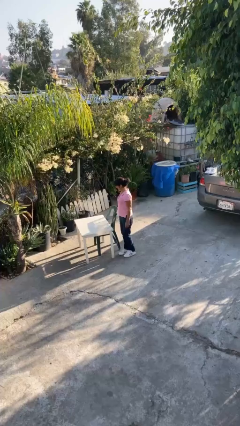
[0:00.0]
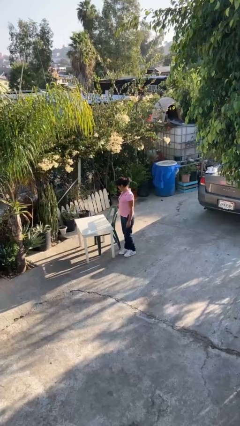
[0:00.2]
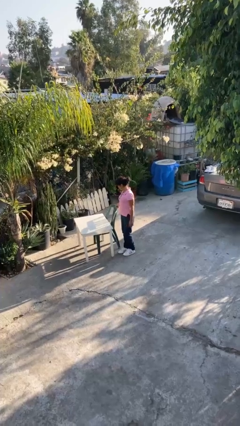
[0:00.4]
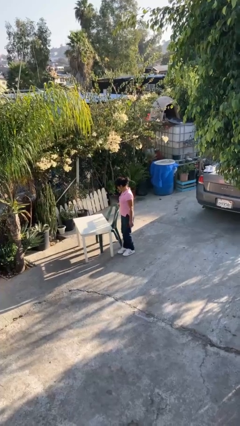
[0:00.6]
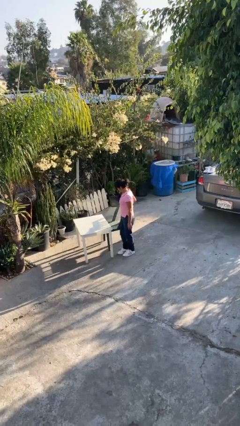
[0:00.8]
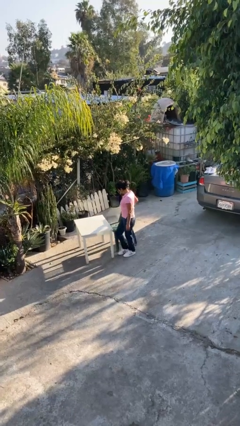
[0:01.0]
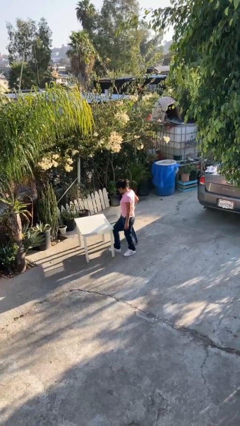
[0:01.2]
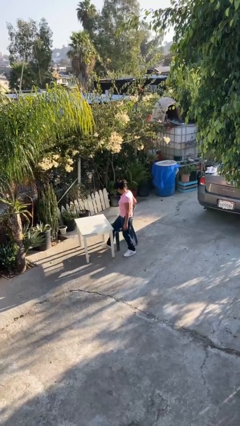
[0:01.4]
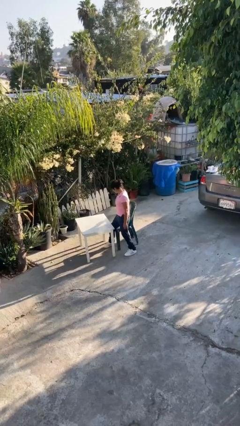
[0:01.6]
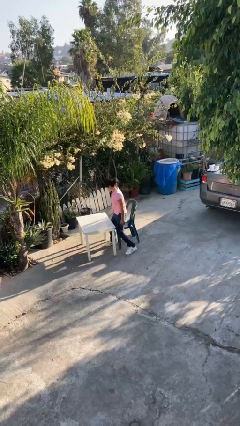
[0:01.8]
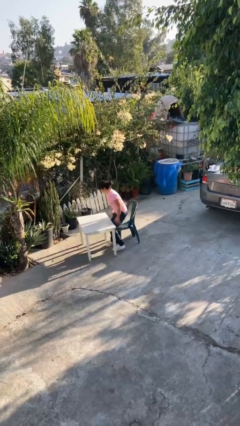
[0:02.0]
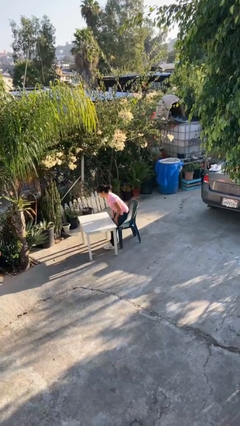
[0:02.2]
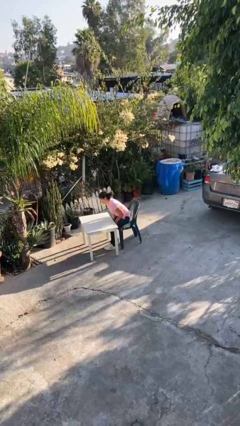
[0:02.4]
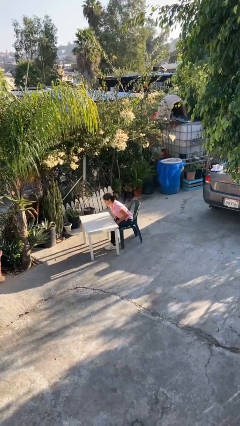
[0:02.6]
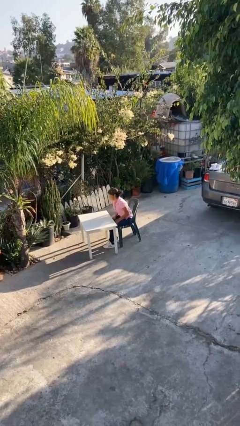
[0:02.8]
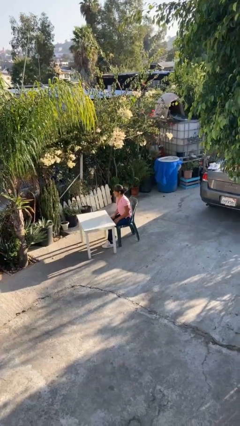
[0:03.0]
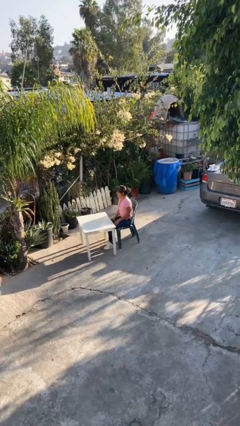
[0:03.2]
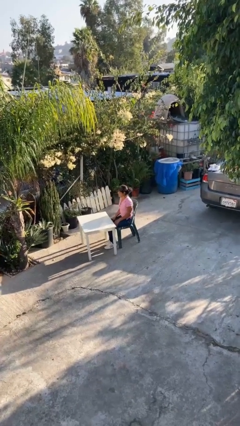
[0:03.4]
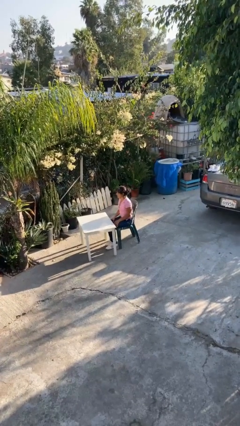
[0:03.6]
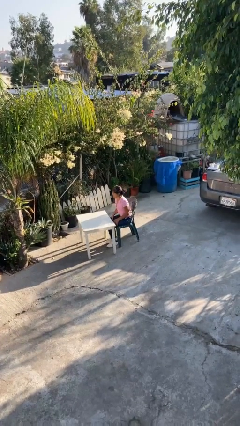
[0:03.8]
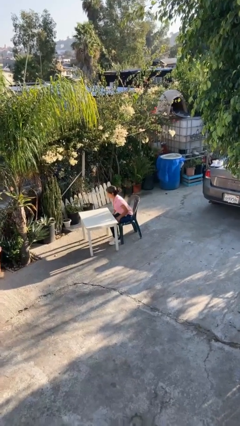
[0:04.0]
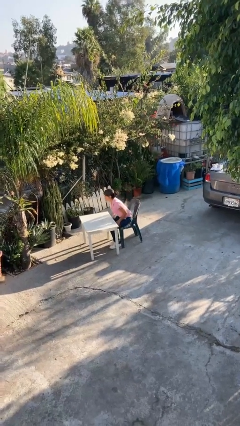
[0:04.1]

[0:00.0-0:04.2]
person sits down

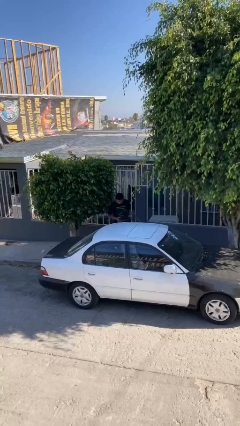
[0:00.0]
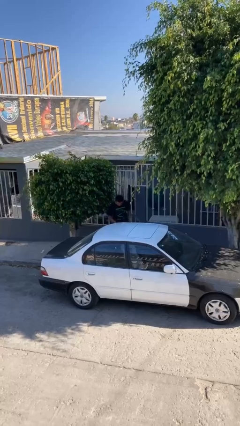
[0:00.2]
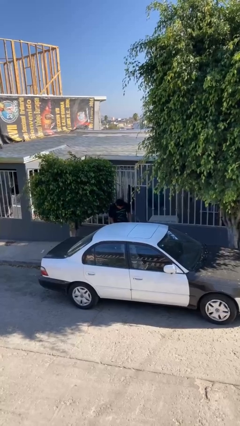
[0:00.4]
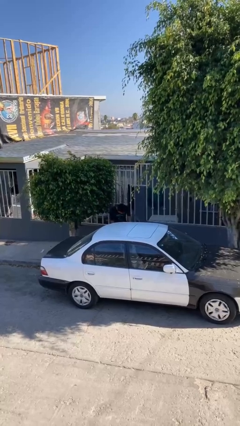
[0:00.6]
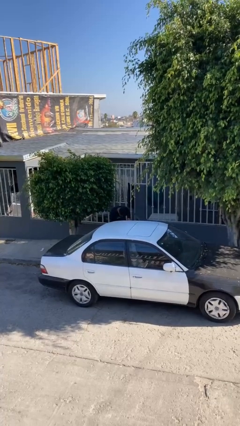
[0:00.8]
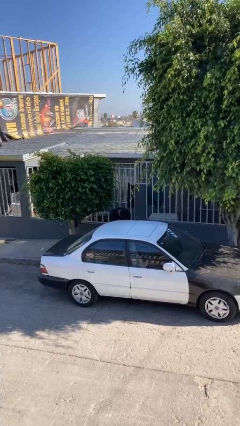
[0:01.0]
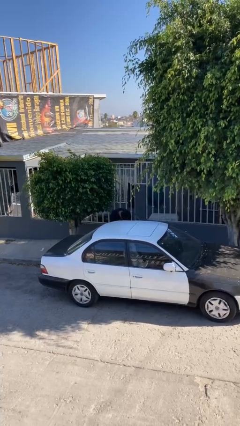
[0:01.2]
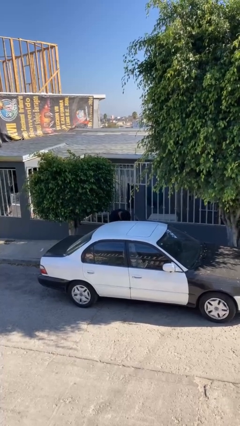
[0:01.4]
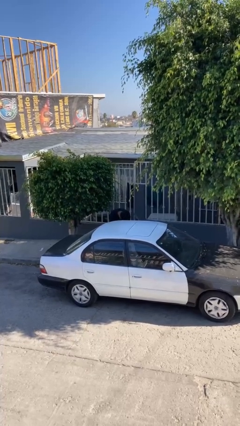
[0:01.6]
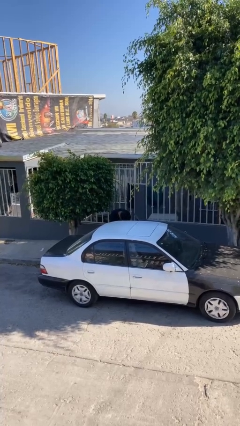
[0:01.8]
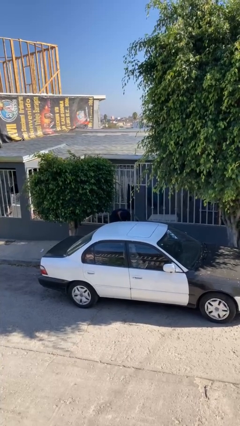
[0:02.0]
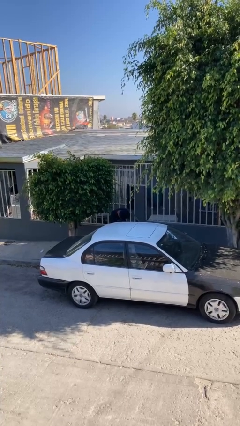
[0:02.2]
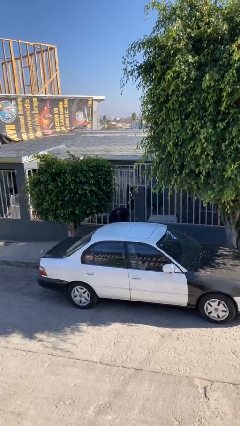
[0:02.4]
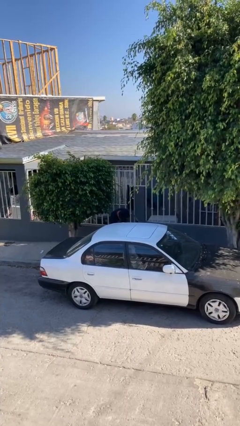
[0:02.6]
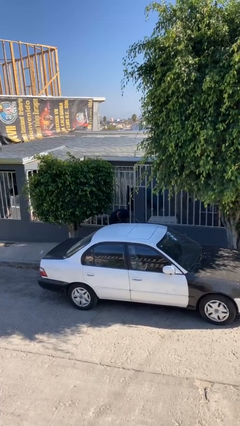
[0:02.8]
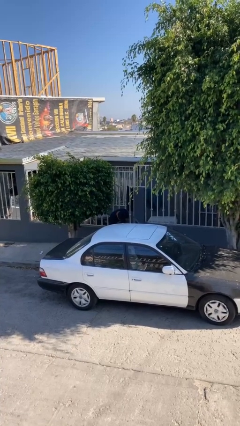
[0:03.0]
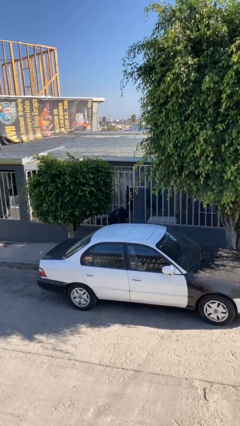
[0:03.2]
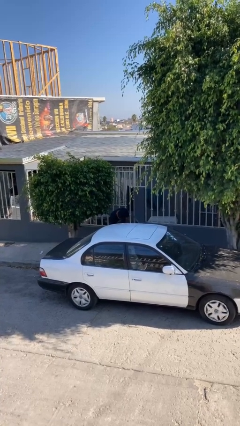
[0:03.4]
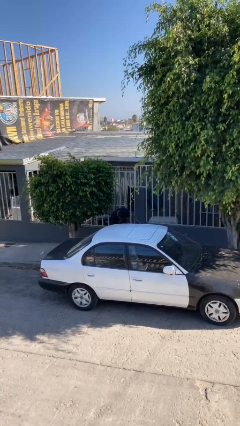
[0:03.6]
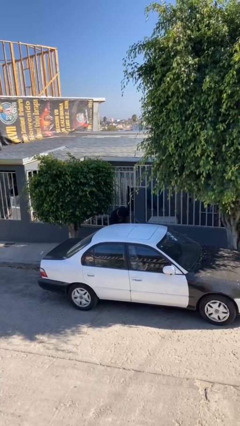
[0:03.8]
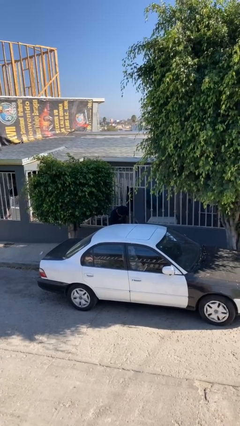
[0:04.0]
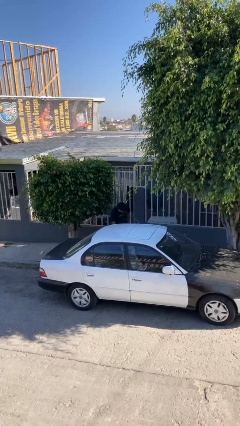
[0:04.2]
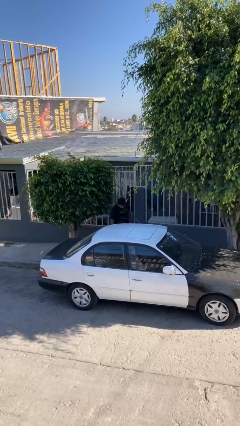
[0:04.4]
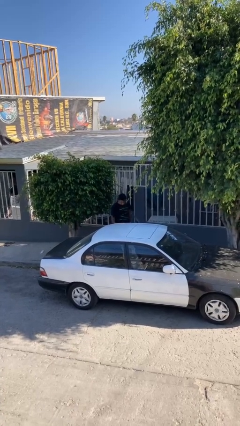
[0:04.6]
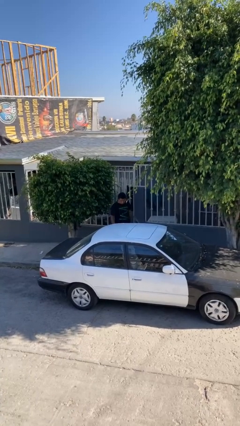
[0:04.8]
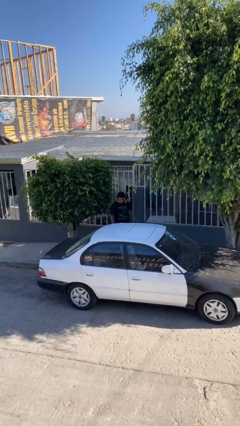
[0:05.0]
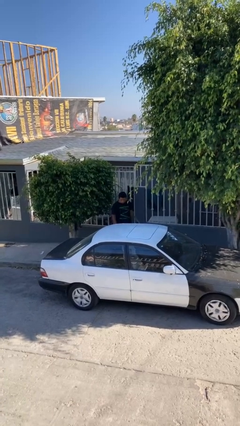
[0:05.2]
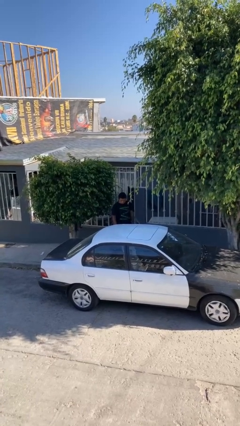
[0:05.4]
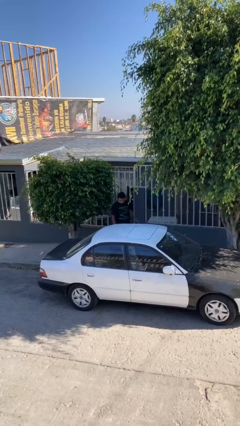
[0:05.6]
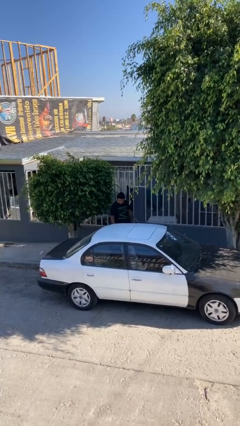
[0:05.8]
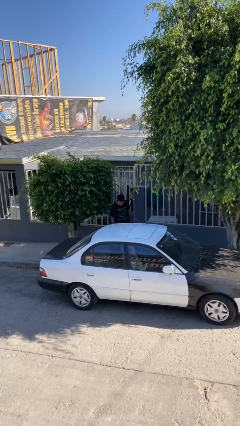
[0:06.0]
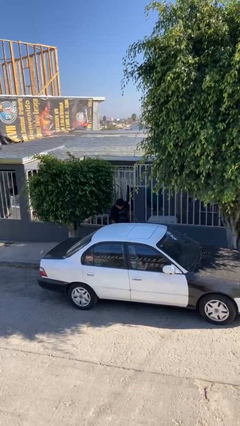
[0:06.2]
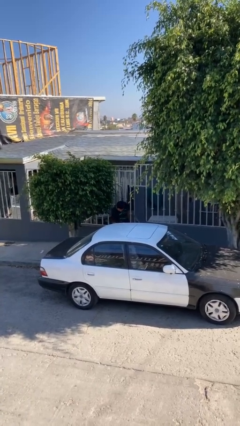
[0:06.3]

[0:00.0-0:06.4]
person loads car

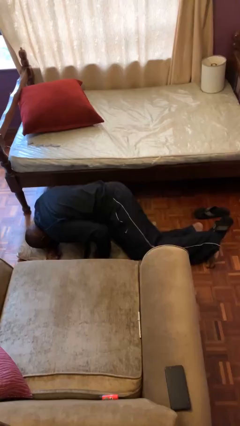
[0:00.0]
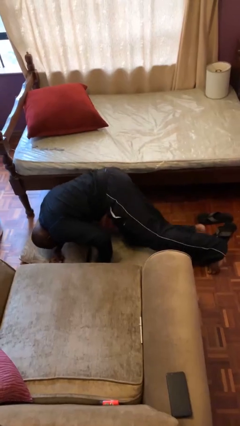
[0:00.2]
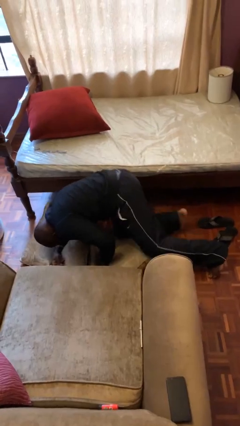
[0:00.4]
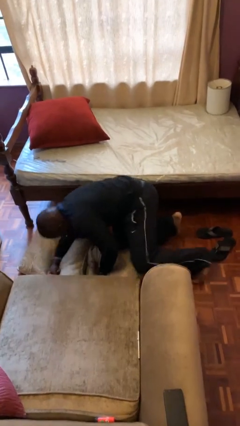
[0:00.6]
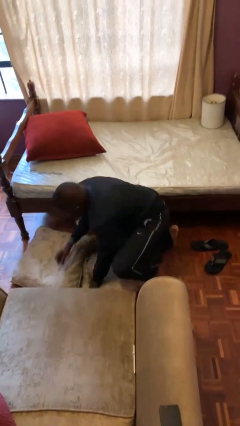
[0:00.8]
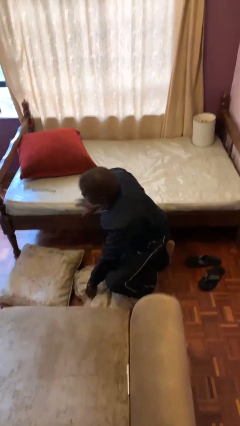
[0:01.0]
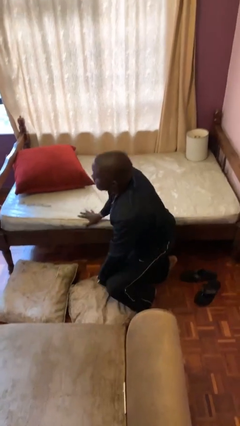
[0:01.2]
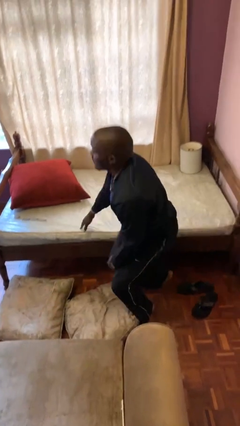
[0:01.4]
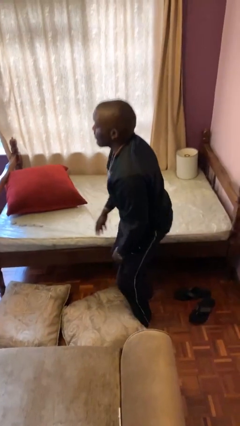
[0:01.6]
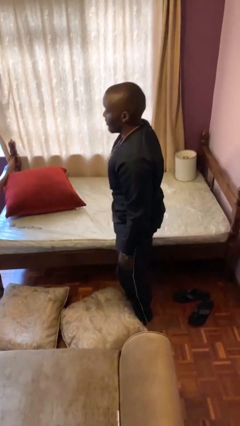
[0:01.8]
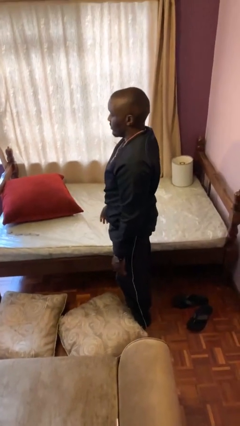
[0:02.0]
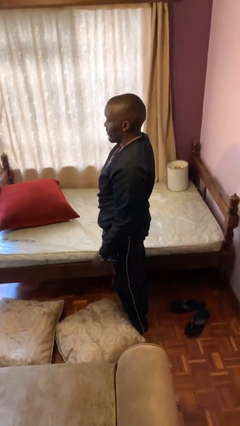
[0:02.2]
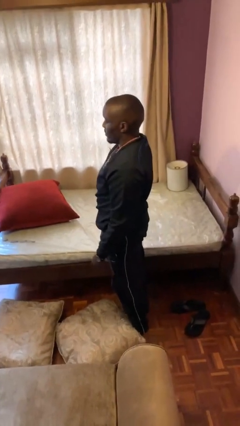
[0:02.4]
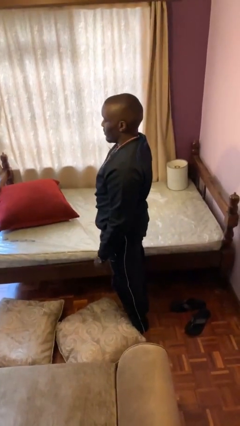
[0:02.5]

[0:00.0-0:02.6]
person stands up from floor

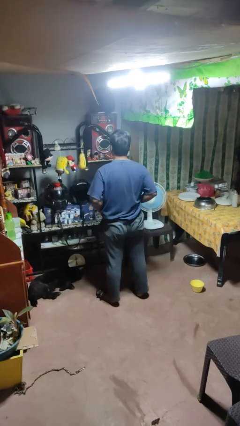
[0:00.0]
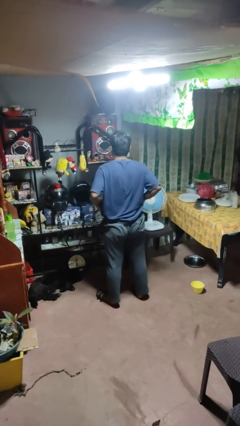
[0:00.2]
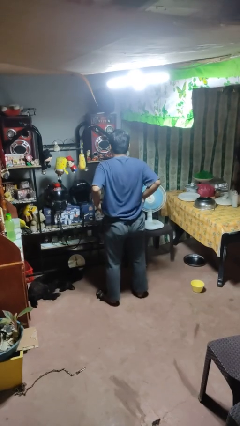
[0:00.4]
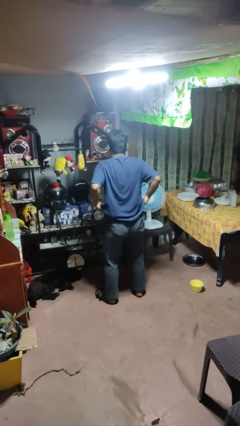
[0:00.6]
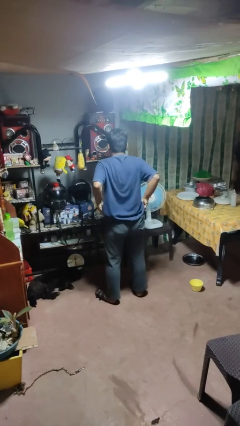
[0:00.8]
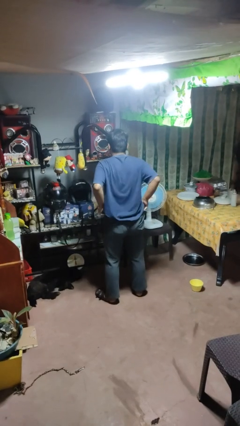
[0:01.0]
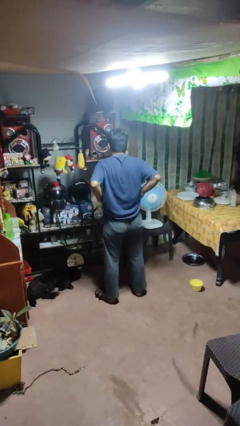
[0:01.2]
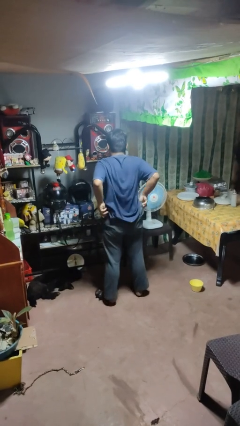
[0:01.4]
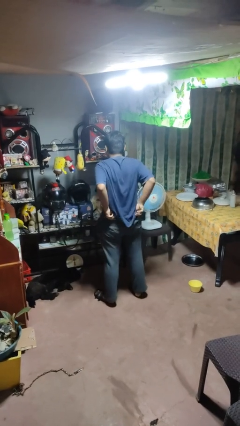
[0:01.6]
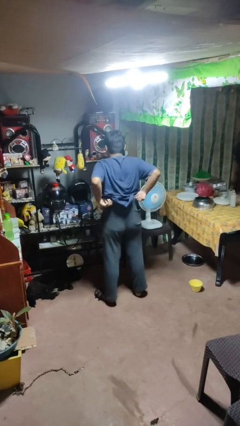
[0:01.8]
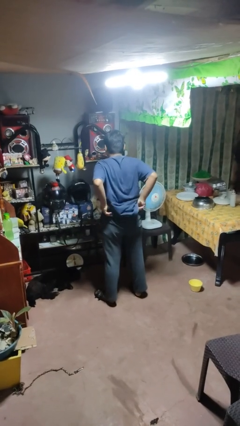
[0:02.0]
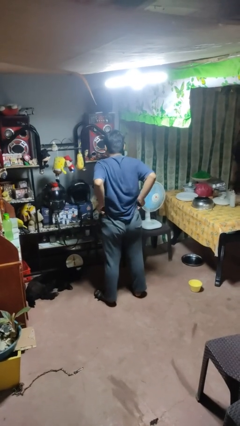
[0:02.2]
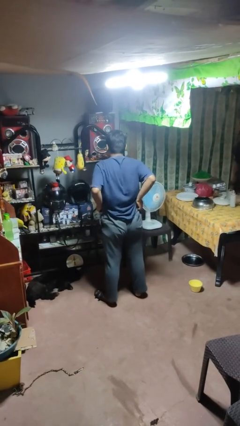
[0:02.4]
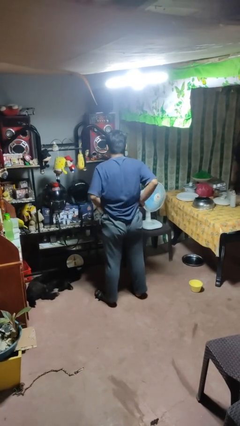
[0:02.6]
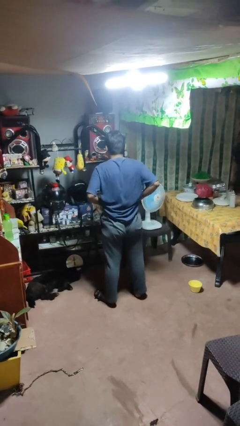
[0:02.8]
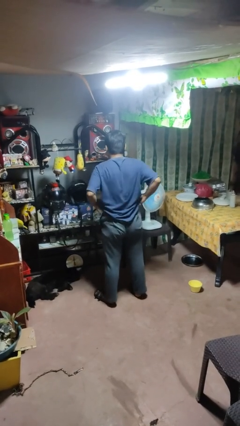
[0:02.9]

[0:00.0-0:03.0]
person hikes up pants

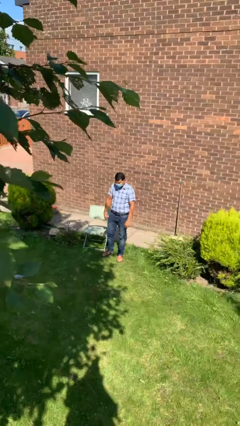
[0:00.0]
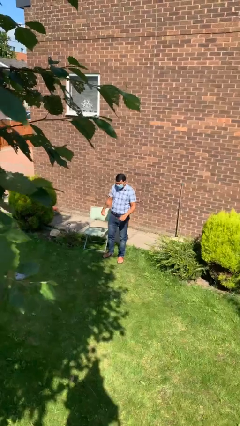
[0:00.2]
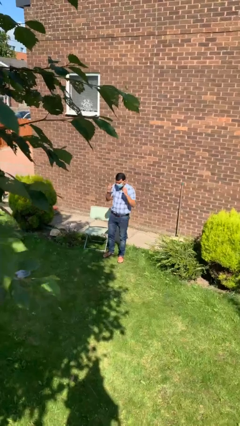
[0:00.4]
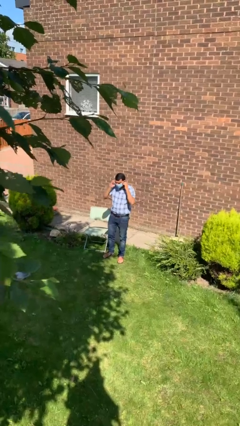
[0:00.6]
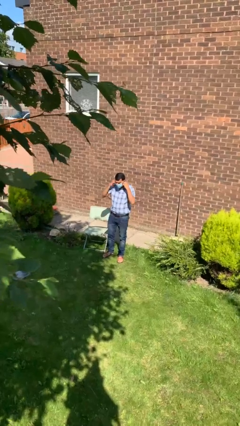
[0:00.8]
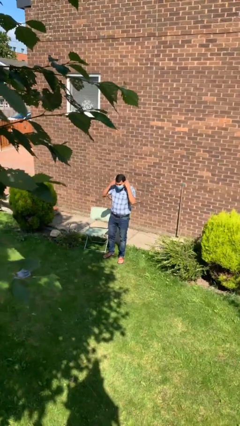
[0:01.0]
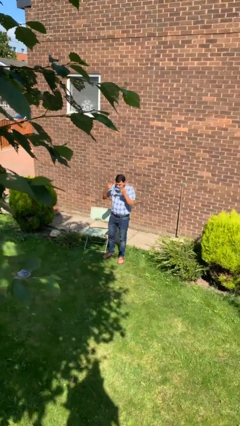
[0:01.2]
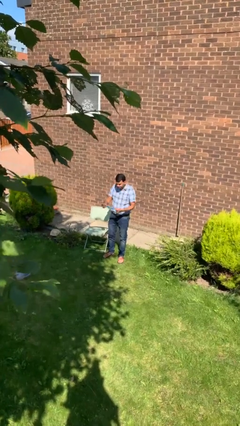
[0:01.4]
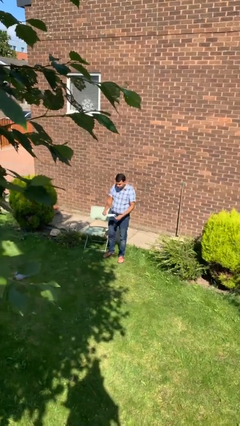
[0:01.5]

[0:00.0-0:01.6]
person takes off facemask
